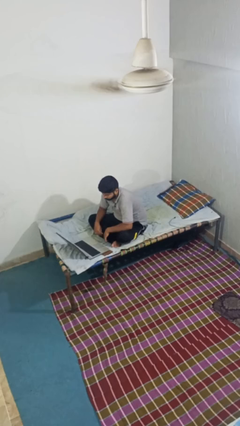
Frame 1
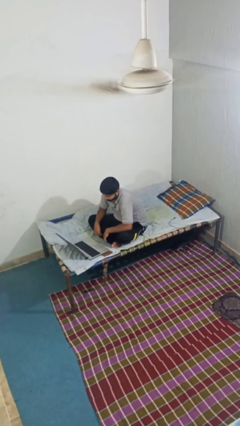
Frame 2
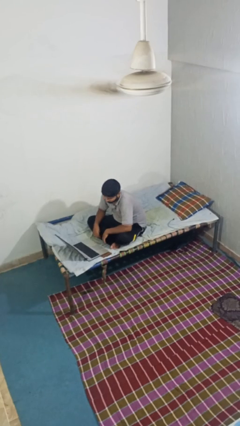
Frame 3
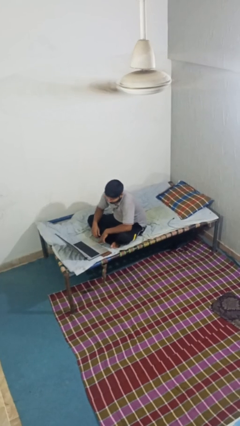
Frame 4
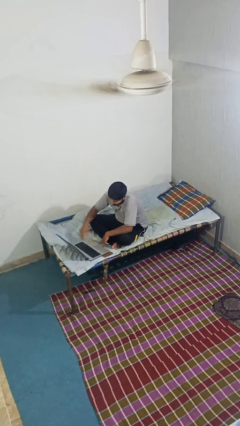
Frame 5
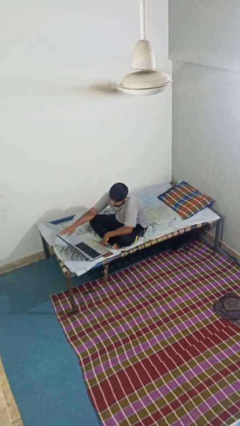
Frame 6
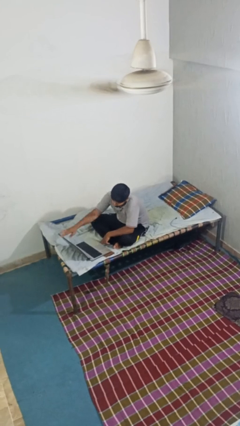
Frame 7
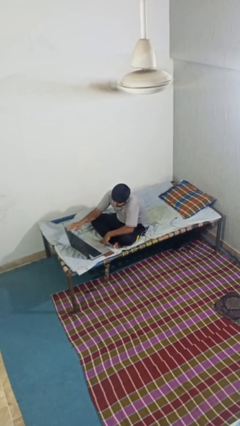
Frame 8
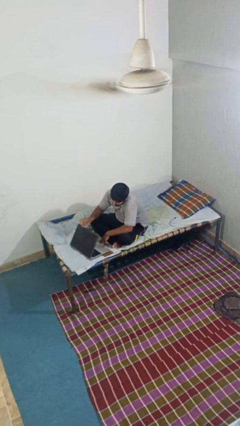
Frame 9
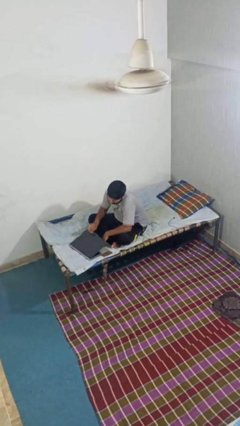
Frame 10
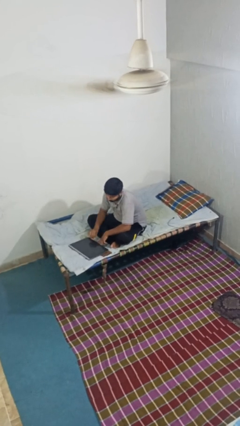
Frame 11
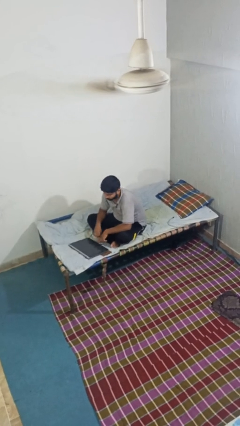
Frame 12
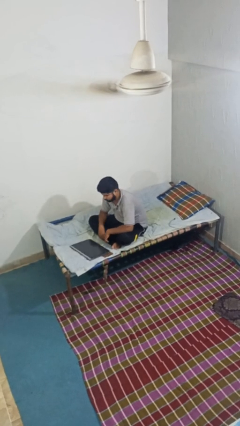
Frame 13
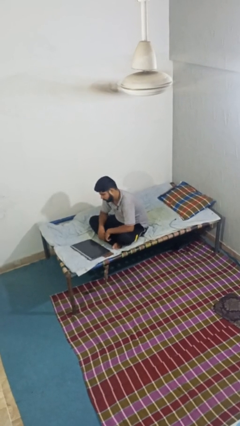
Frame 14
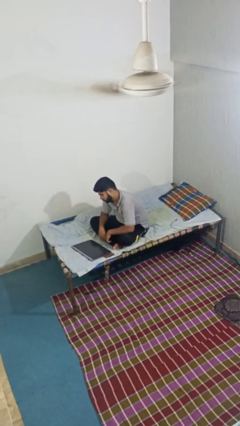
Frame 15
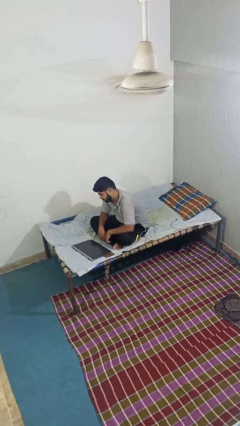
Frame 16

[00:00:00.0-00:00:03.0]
person closes laptop

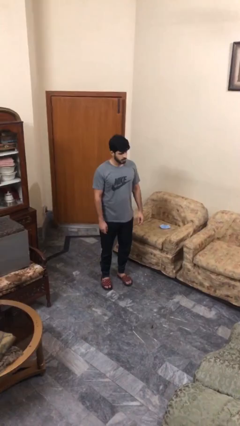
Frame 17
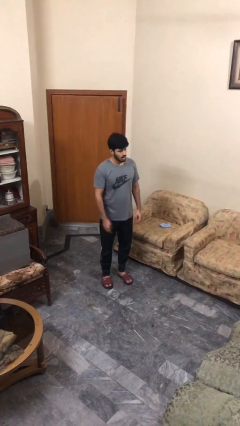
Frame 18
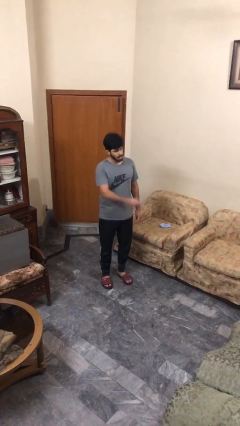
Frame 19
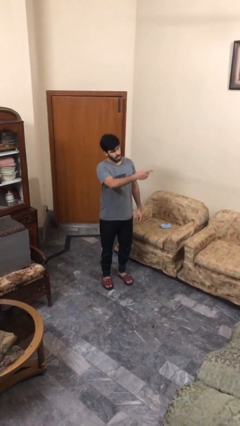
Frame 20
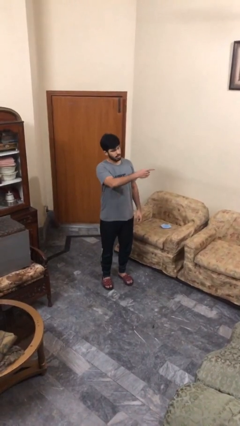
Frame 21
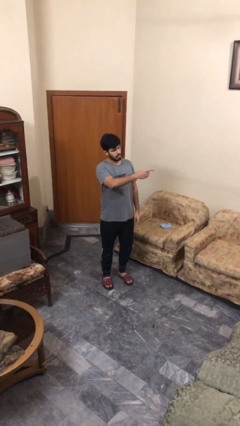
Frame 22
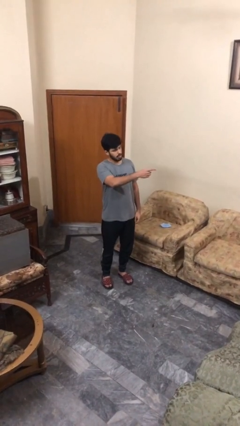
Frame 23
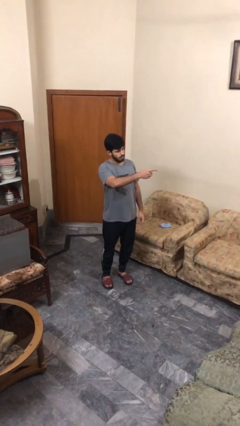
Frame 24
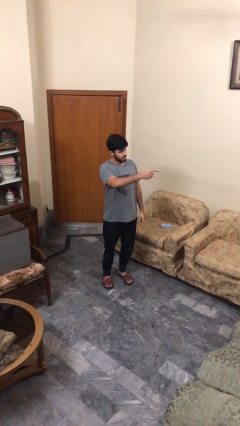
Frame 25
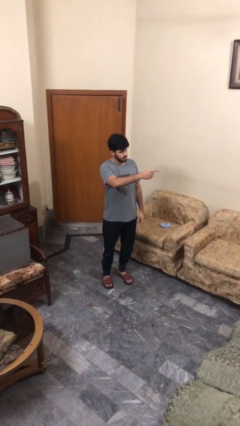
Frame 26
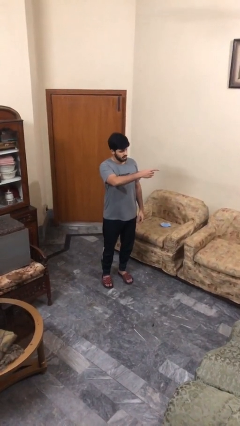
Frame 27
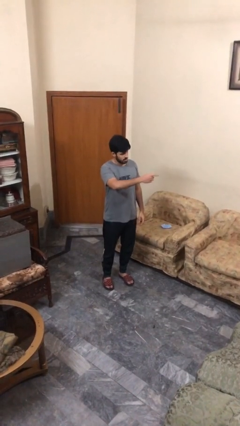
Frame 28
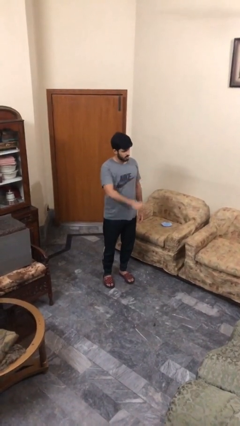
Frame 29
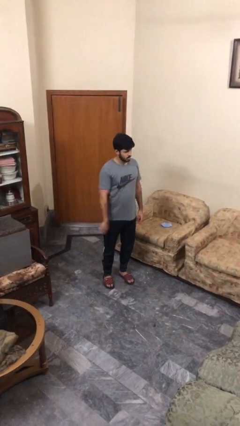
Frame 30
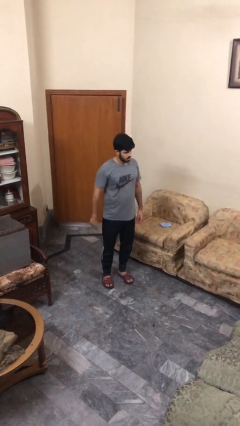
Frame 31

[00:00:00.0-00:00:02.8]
person points at person

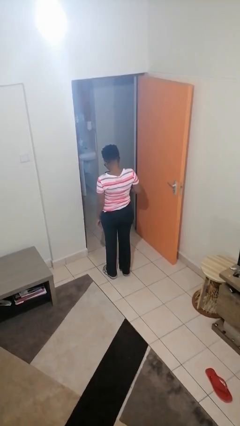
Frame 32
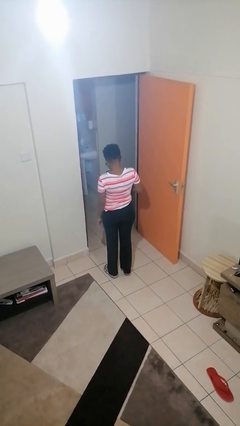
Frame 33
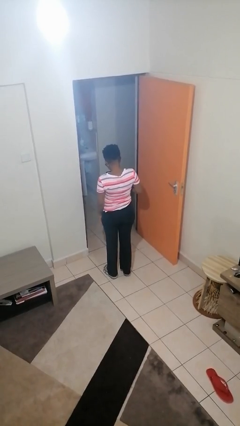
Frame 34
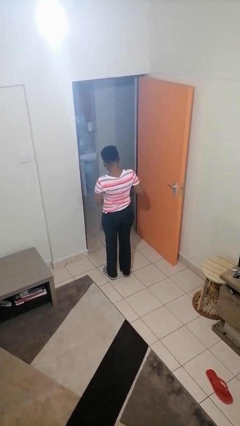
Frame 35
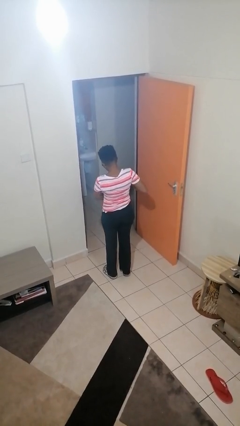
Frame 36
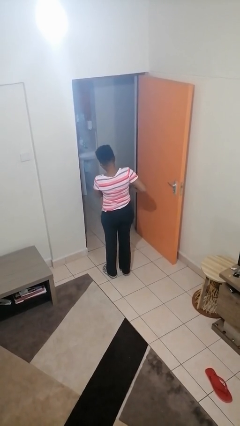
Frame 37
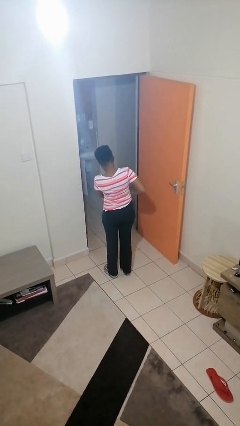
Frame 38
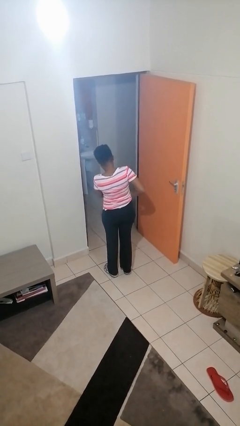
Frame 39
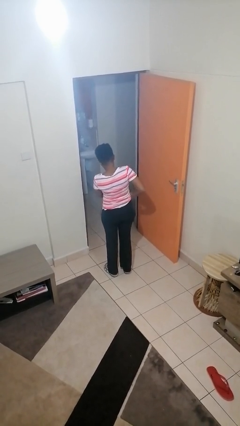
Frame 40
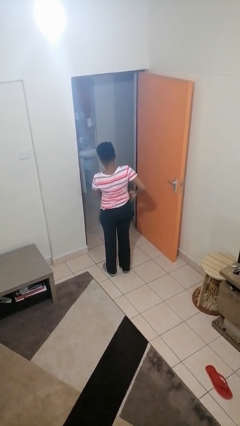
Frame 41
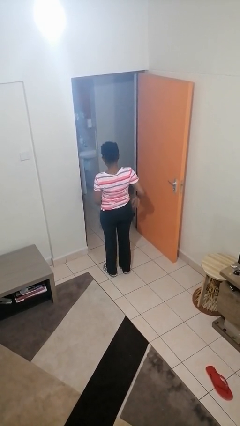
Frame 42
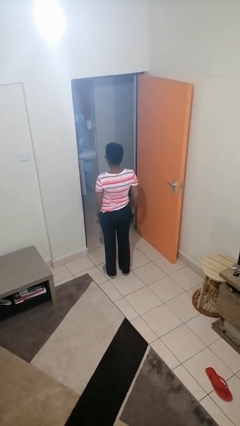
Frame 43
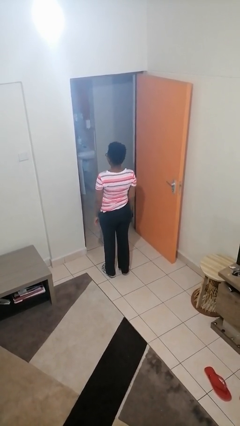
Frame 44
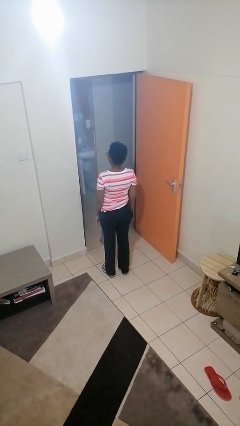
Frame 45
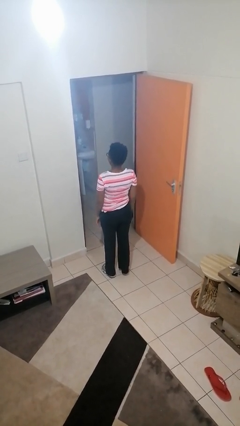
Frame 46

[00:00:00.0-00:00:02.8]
person puts phone into pocket

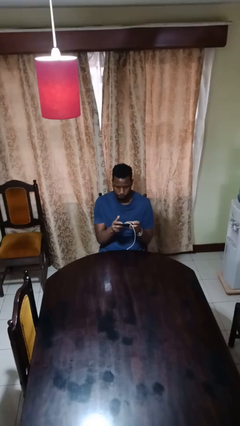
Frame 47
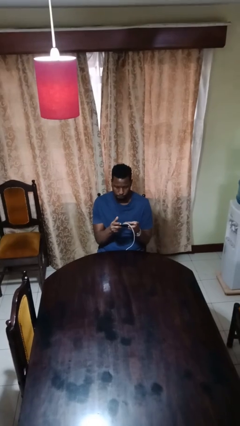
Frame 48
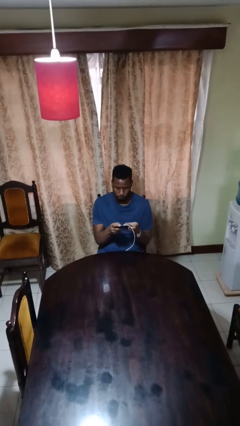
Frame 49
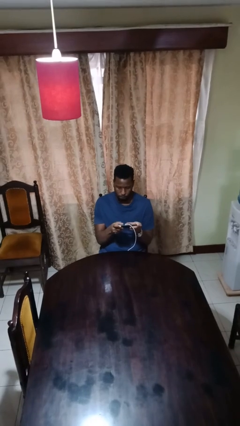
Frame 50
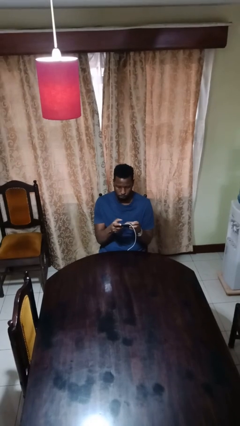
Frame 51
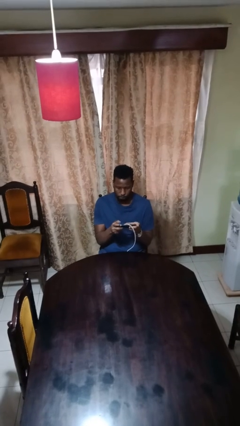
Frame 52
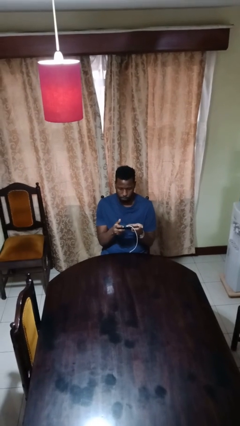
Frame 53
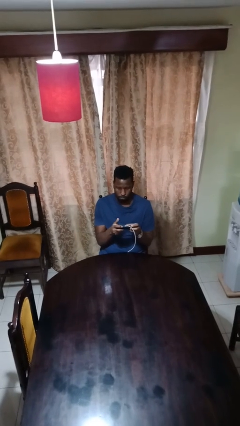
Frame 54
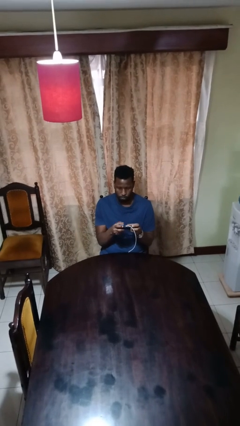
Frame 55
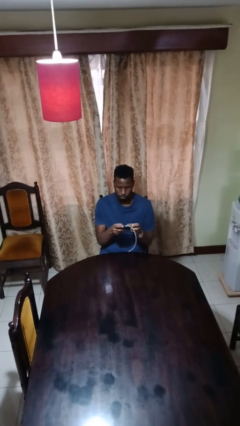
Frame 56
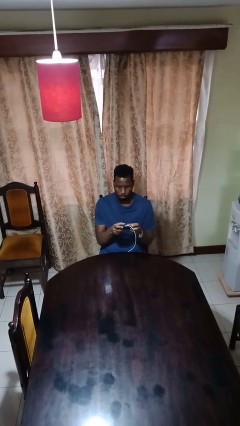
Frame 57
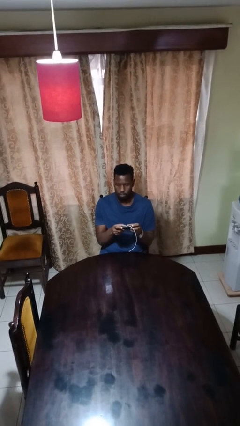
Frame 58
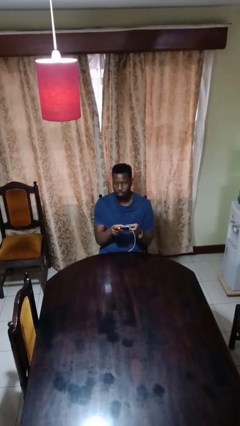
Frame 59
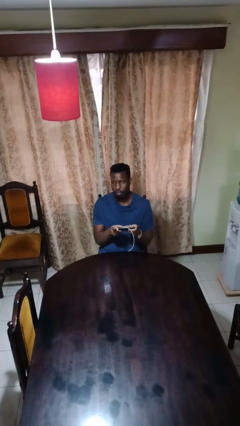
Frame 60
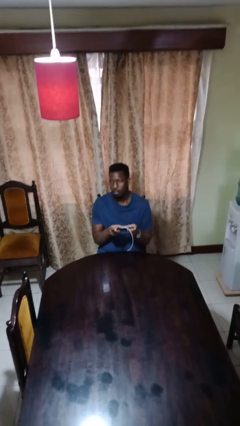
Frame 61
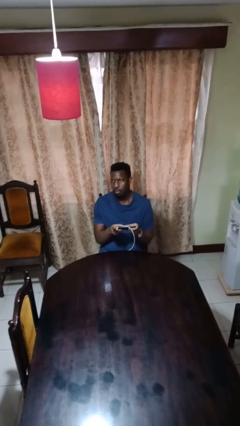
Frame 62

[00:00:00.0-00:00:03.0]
person interacts with handheld game

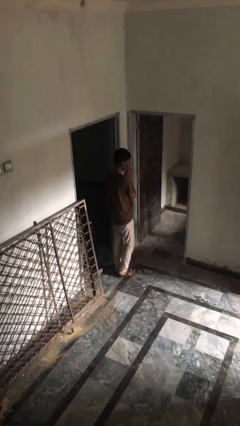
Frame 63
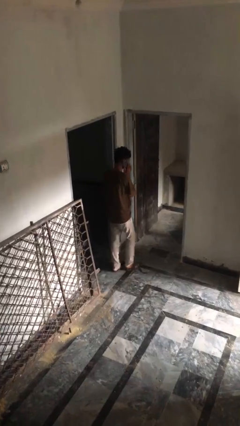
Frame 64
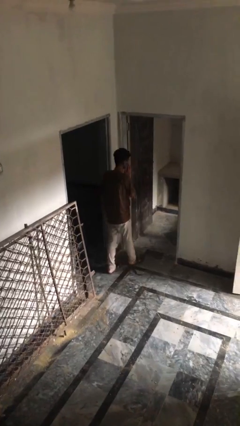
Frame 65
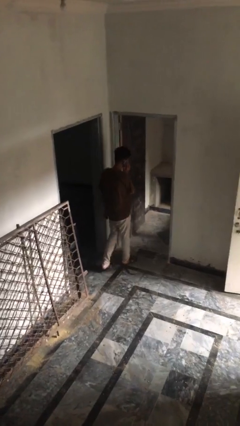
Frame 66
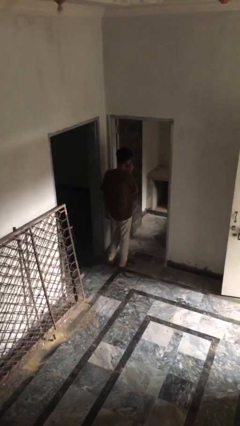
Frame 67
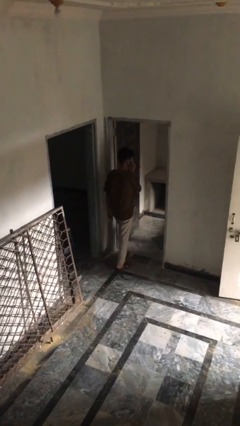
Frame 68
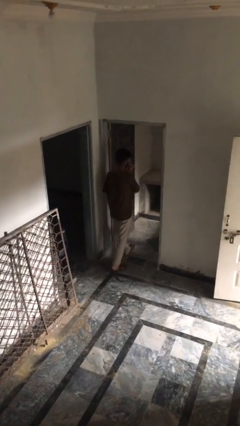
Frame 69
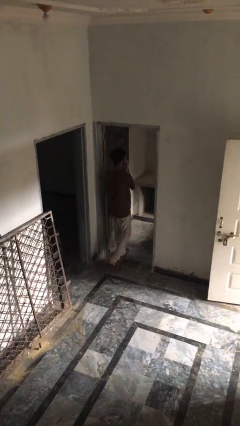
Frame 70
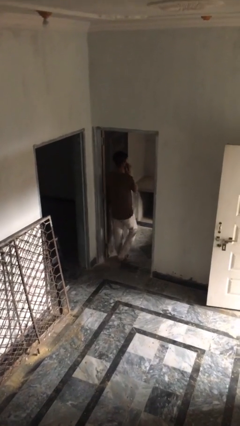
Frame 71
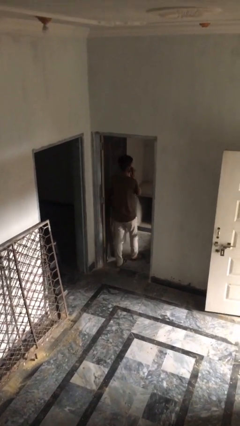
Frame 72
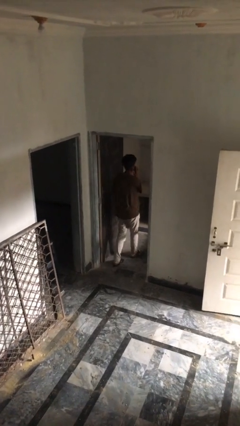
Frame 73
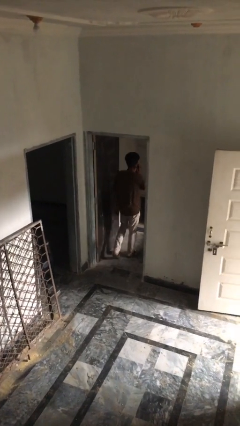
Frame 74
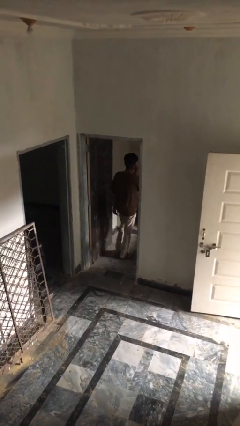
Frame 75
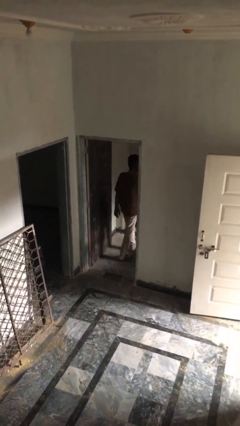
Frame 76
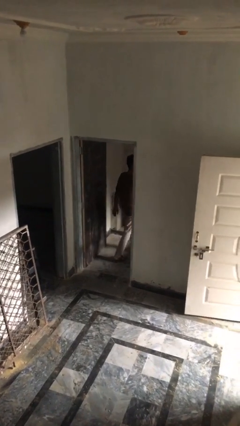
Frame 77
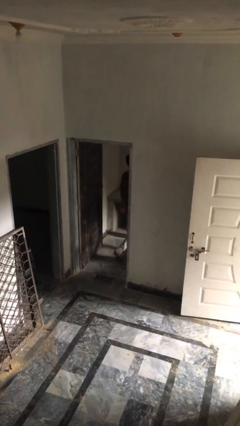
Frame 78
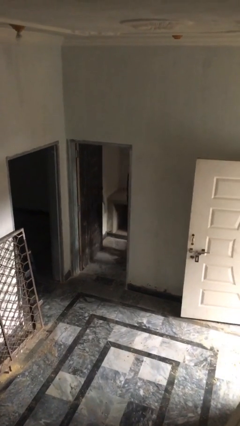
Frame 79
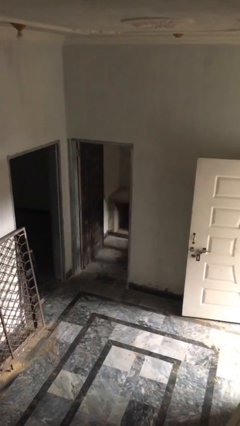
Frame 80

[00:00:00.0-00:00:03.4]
person exits scene through structure

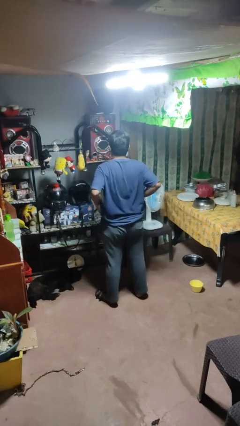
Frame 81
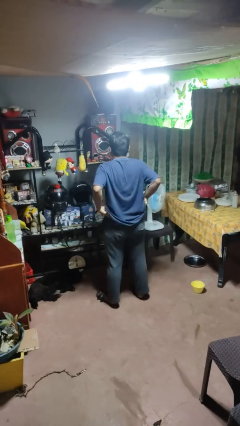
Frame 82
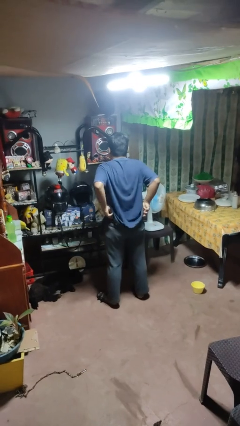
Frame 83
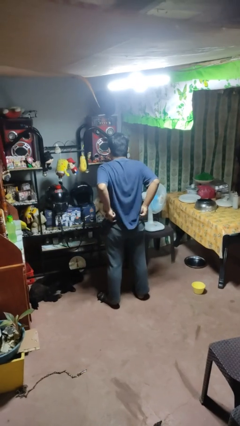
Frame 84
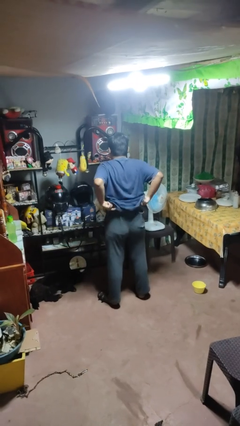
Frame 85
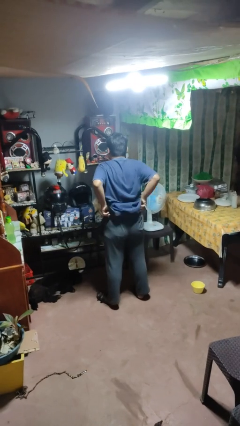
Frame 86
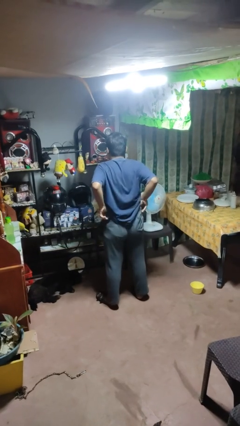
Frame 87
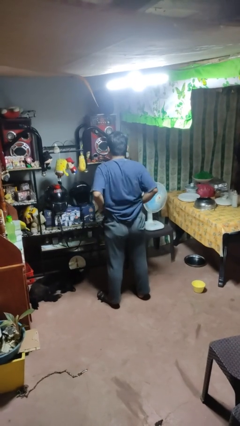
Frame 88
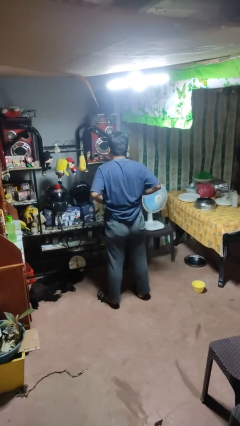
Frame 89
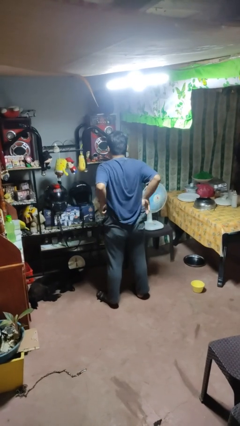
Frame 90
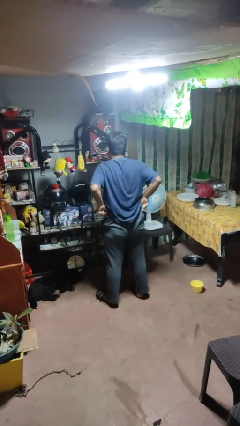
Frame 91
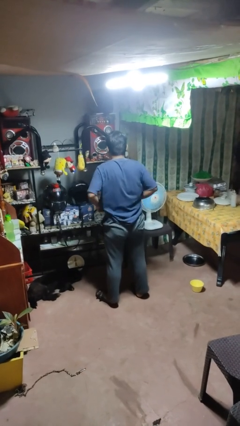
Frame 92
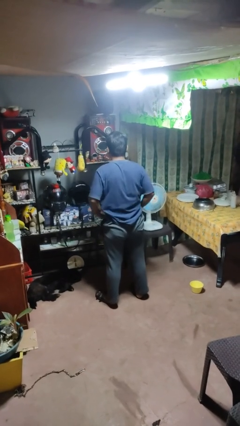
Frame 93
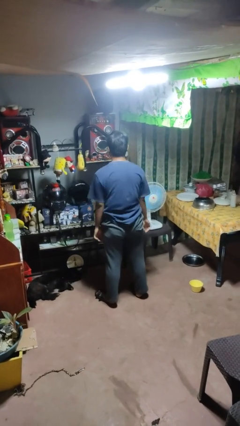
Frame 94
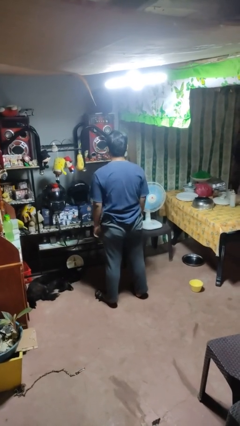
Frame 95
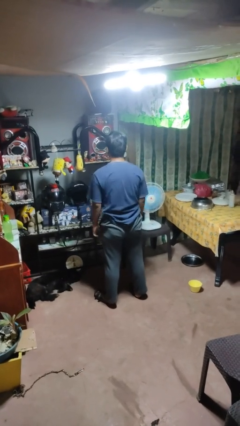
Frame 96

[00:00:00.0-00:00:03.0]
person hikes up pants
